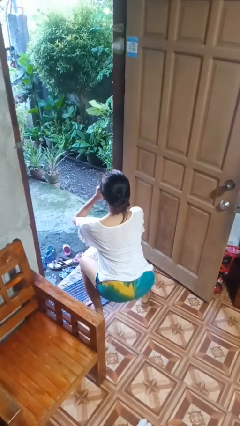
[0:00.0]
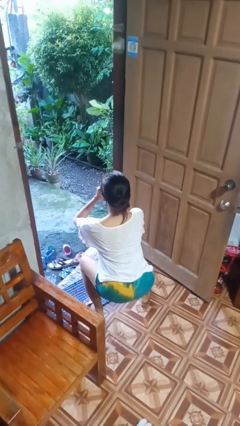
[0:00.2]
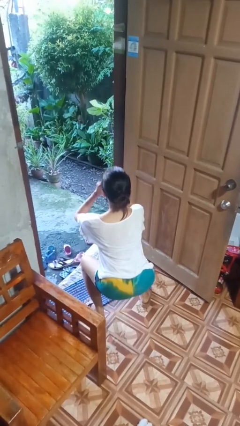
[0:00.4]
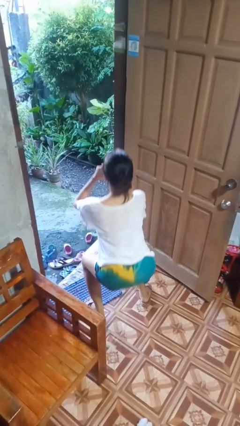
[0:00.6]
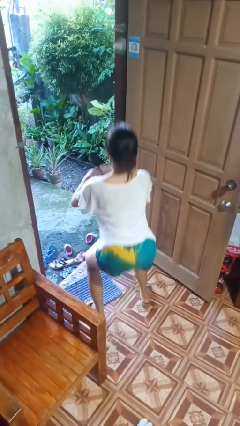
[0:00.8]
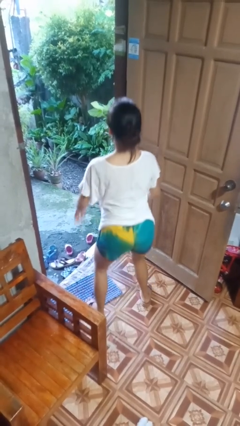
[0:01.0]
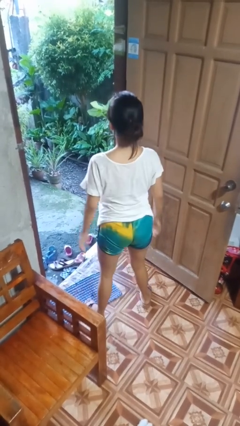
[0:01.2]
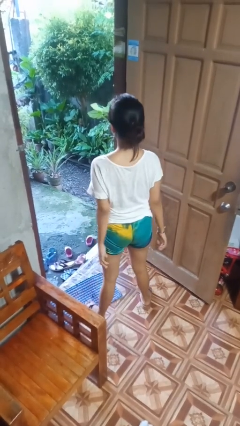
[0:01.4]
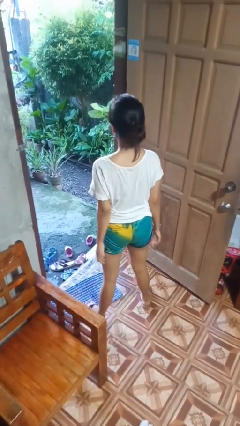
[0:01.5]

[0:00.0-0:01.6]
person stands up

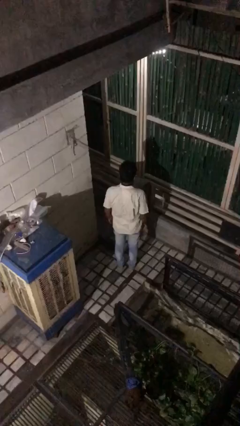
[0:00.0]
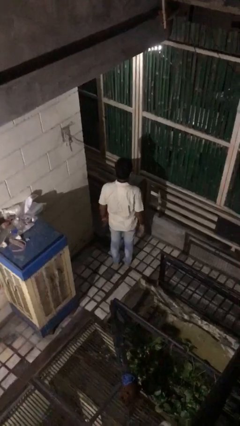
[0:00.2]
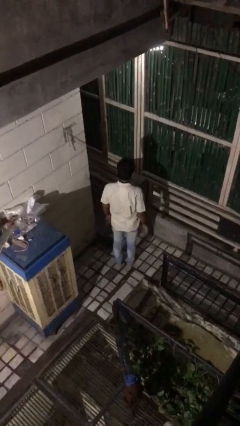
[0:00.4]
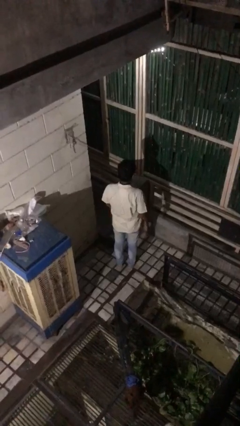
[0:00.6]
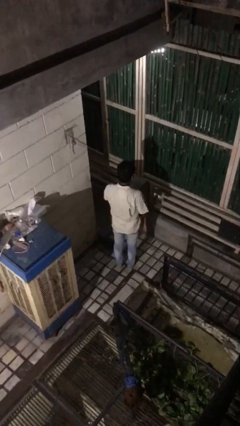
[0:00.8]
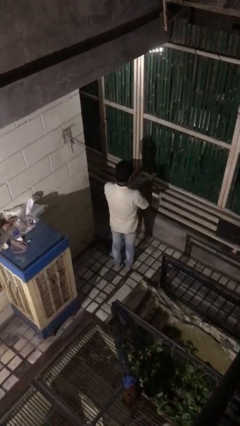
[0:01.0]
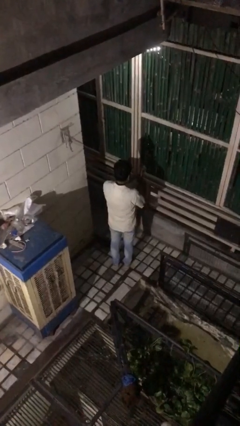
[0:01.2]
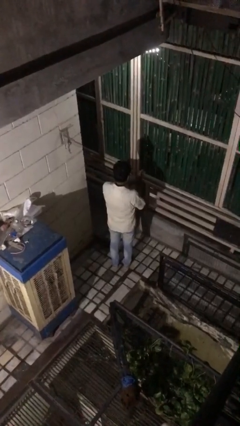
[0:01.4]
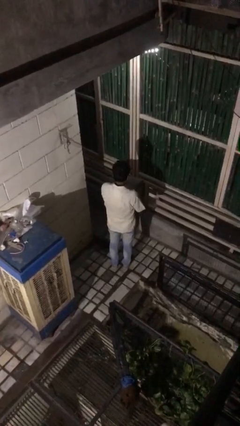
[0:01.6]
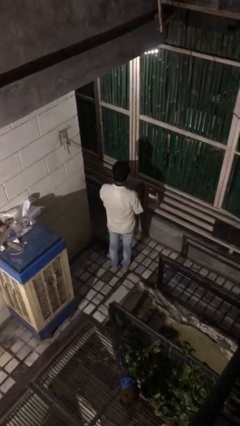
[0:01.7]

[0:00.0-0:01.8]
person claps hands

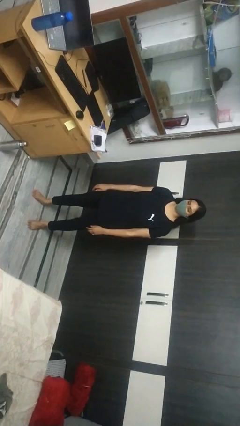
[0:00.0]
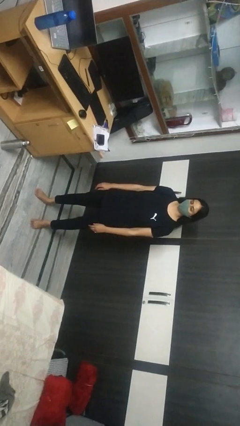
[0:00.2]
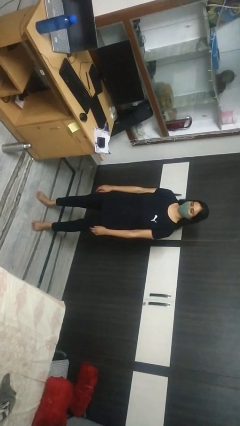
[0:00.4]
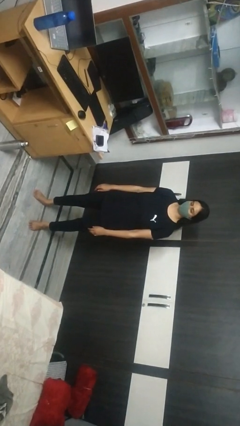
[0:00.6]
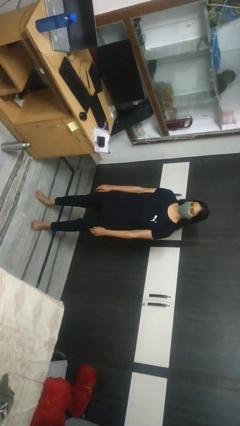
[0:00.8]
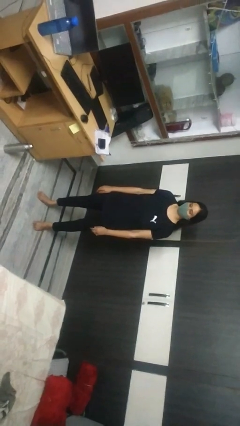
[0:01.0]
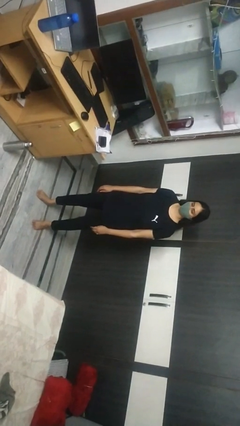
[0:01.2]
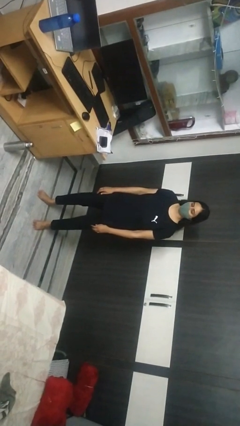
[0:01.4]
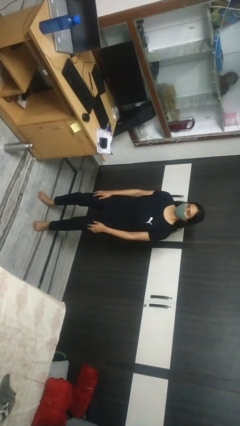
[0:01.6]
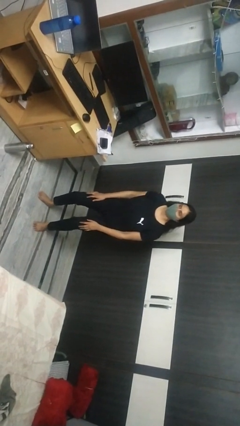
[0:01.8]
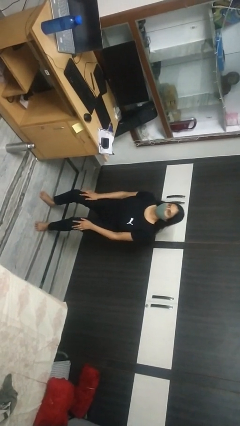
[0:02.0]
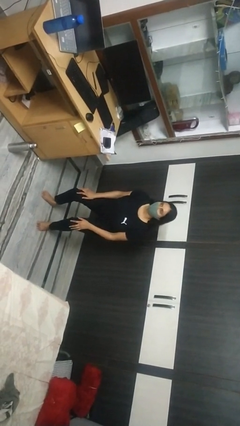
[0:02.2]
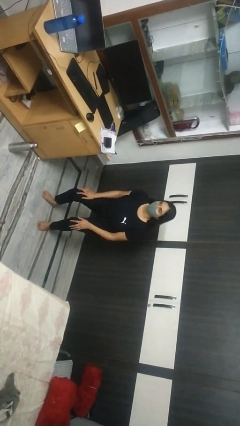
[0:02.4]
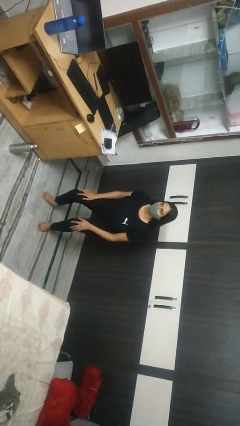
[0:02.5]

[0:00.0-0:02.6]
person squats

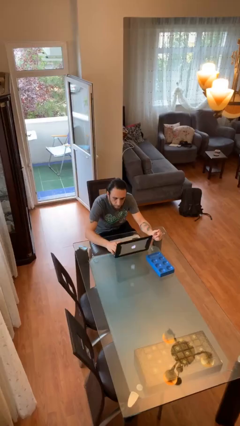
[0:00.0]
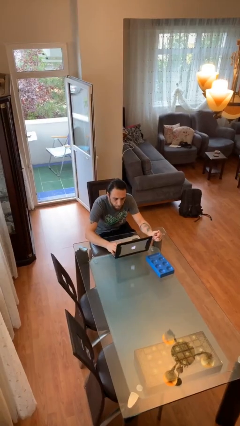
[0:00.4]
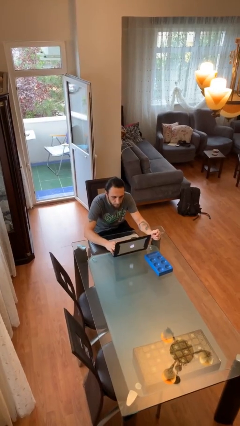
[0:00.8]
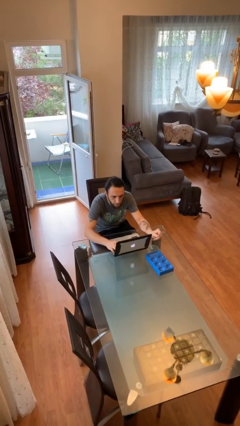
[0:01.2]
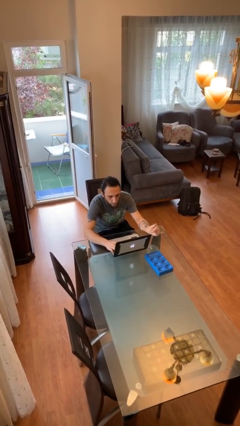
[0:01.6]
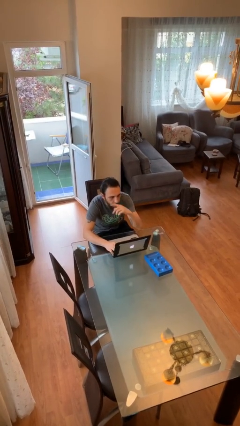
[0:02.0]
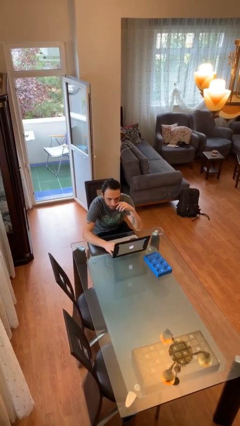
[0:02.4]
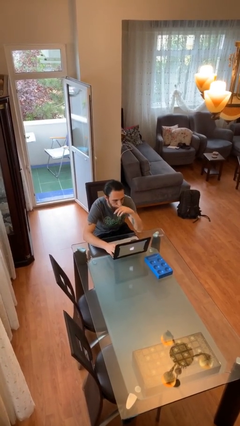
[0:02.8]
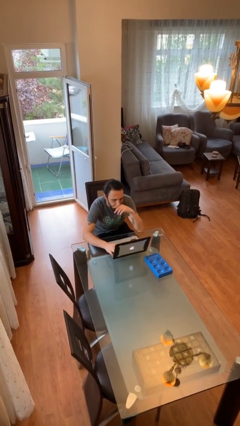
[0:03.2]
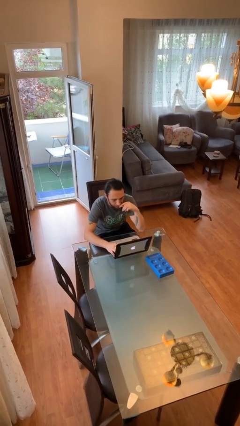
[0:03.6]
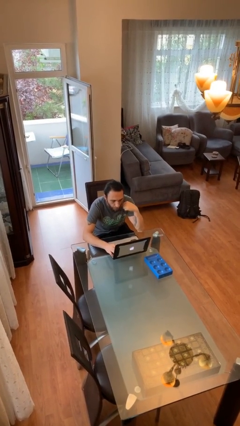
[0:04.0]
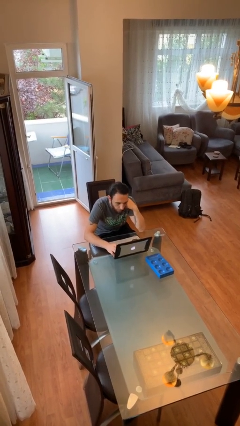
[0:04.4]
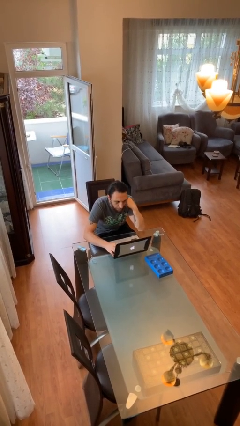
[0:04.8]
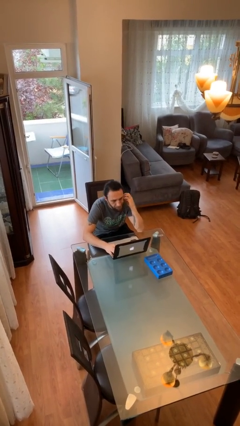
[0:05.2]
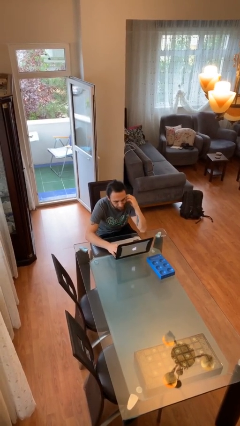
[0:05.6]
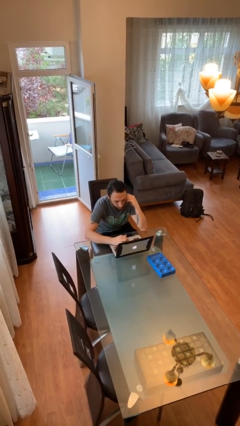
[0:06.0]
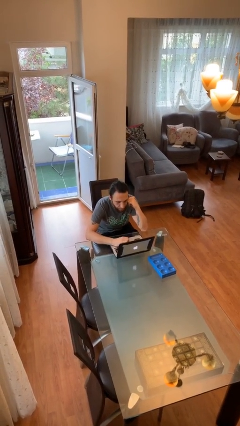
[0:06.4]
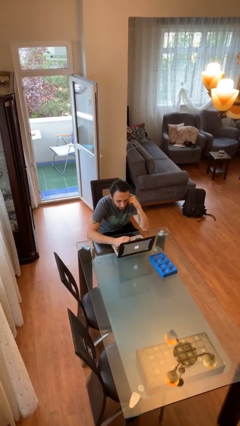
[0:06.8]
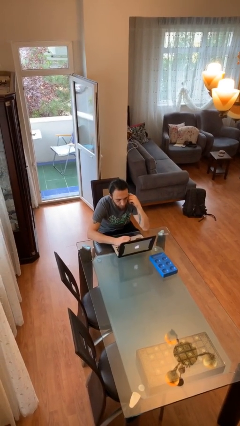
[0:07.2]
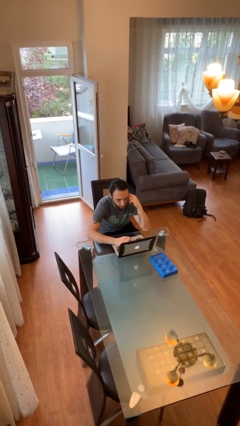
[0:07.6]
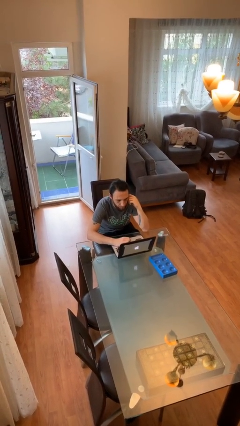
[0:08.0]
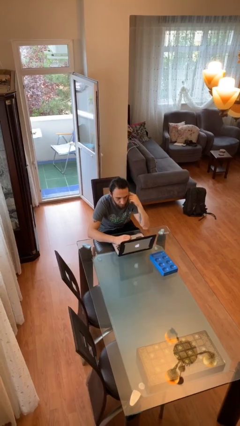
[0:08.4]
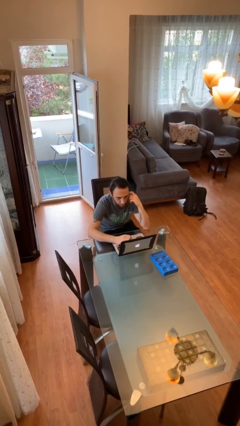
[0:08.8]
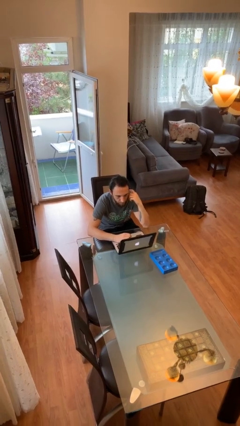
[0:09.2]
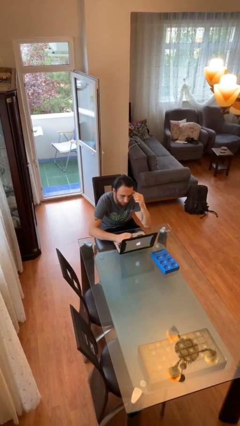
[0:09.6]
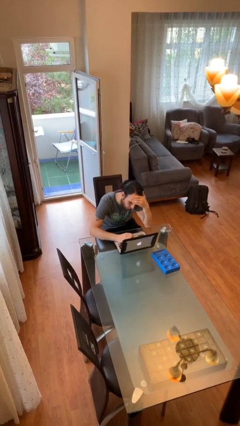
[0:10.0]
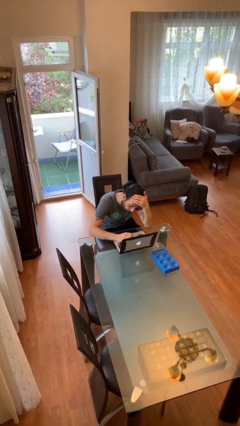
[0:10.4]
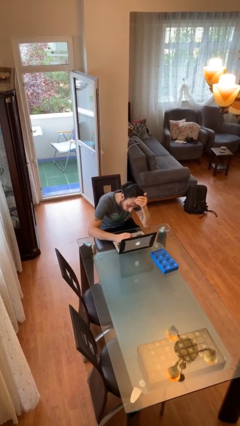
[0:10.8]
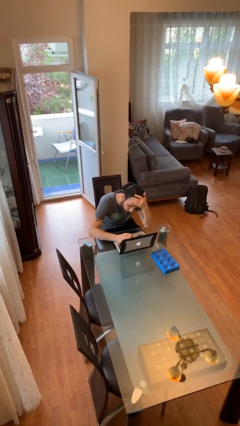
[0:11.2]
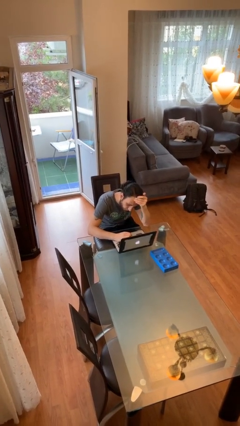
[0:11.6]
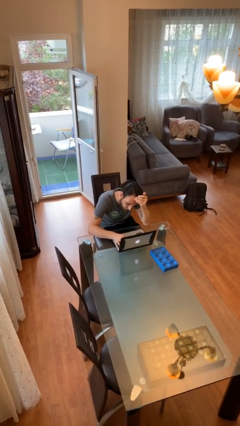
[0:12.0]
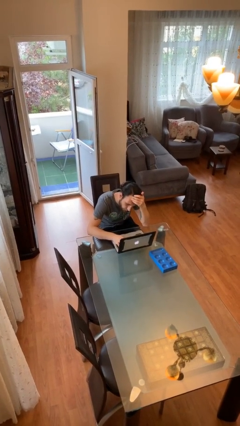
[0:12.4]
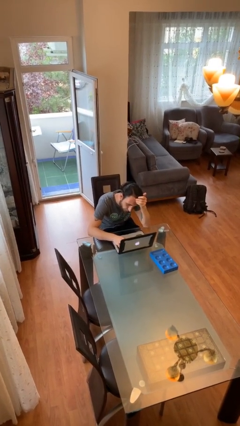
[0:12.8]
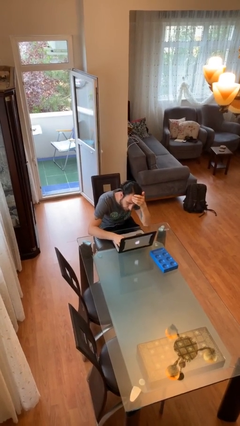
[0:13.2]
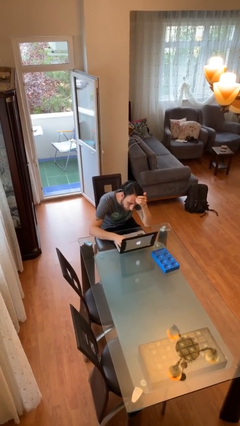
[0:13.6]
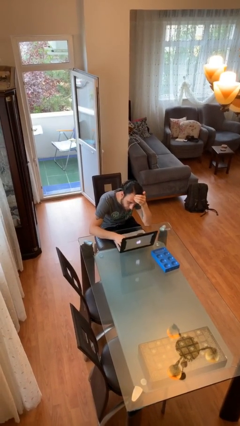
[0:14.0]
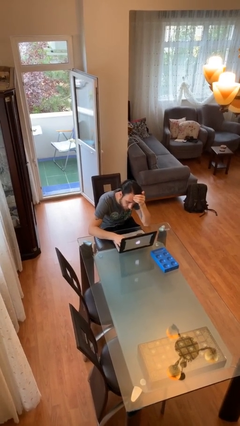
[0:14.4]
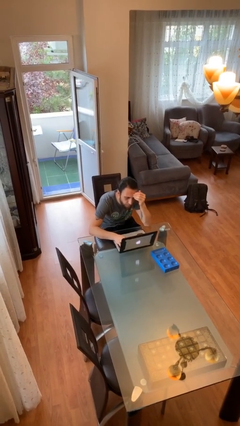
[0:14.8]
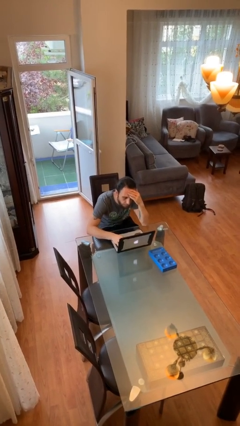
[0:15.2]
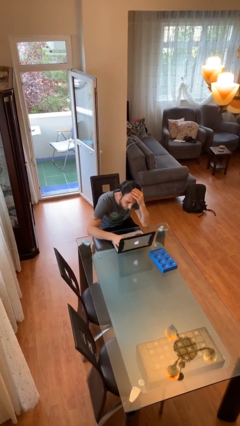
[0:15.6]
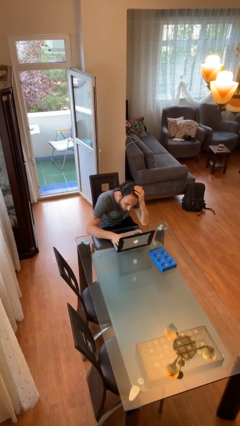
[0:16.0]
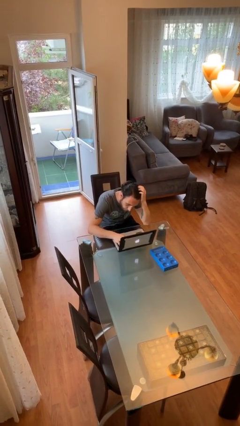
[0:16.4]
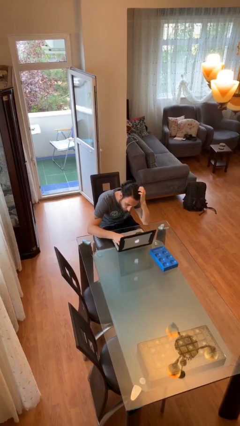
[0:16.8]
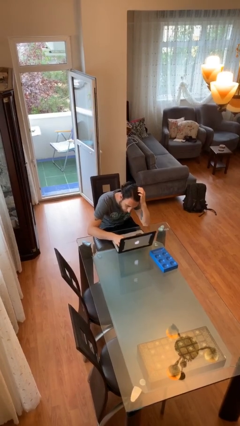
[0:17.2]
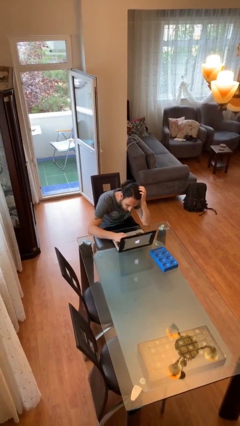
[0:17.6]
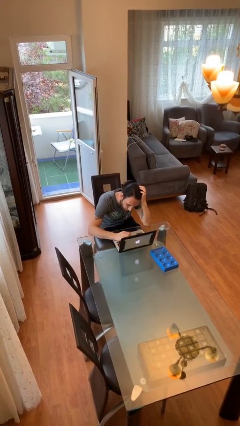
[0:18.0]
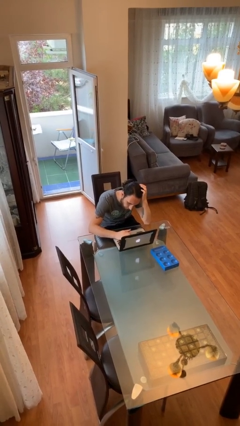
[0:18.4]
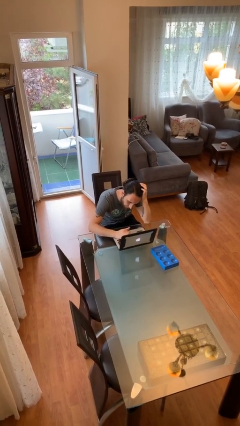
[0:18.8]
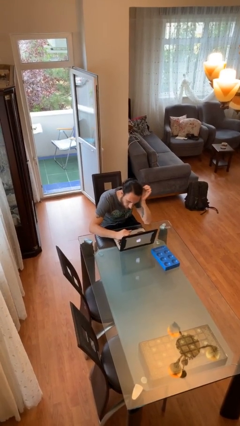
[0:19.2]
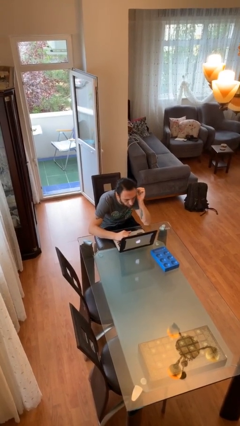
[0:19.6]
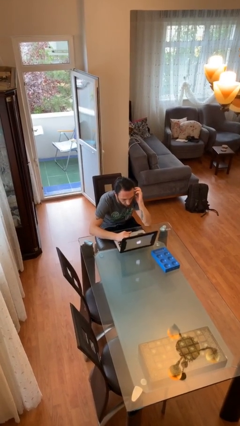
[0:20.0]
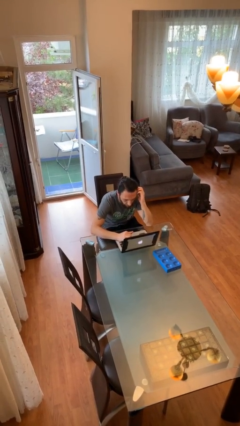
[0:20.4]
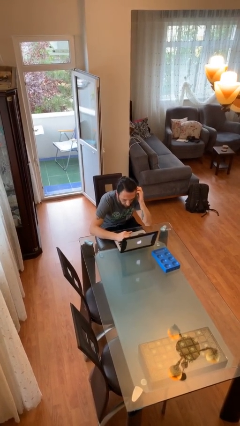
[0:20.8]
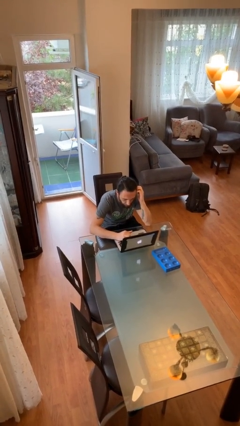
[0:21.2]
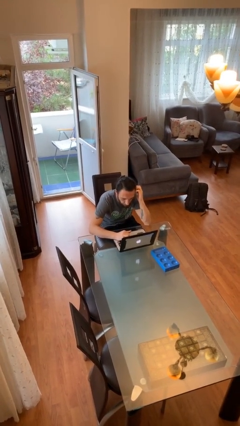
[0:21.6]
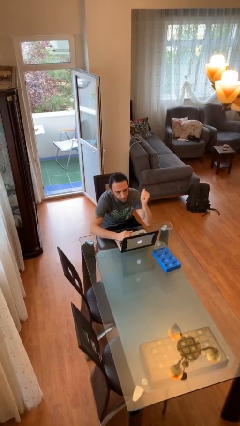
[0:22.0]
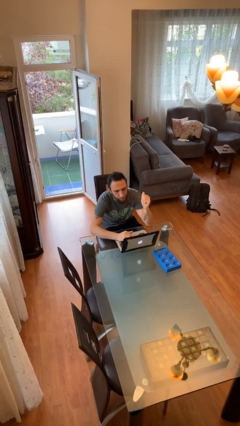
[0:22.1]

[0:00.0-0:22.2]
person interacts with laptop

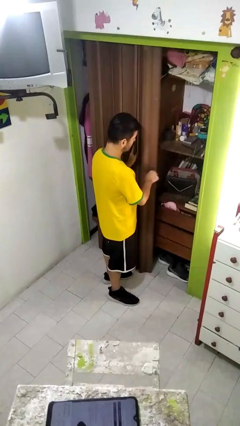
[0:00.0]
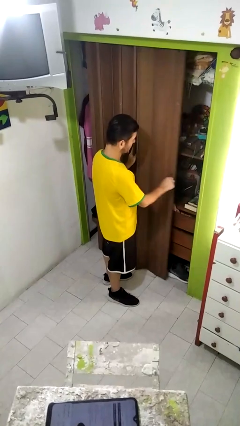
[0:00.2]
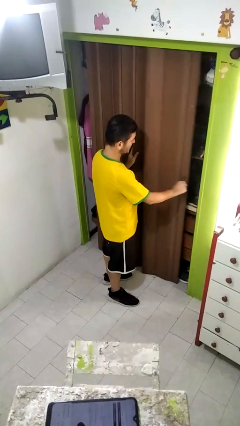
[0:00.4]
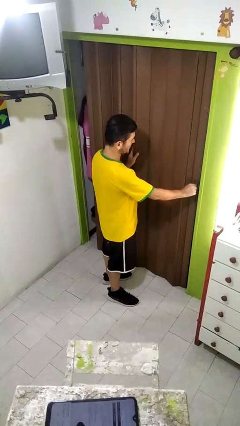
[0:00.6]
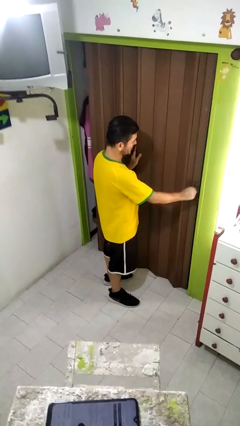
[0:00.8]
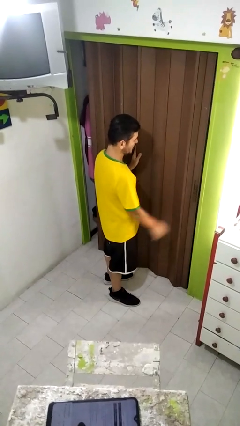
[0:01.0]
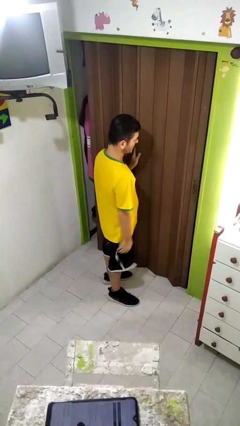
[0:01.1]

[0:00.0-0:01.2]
person closes closet door
